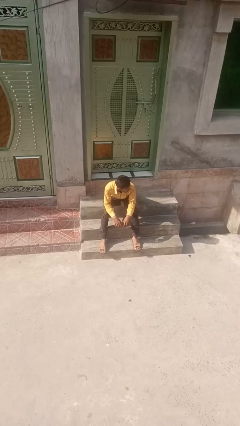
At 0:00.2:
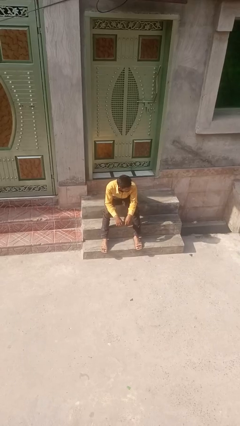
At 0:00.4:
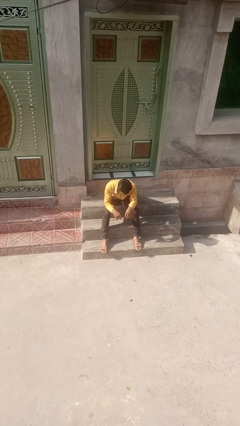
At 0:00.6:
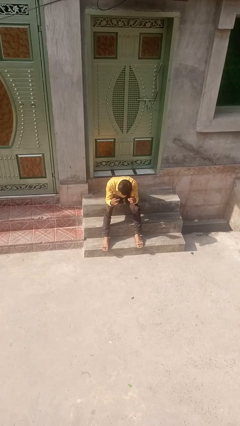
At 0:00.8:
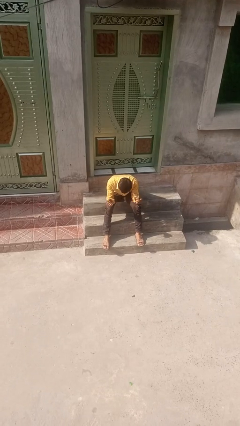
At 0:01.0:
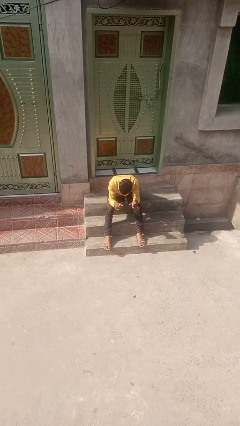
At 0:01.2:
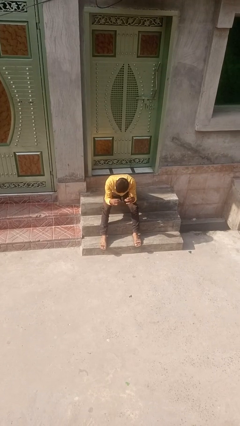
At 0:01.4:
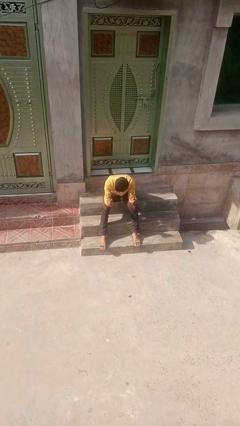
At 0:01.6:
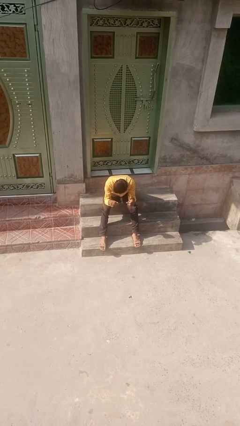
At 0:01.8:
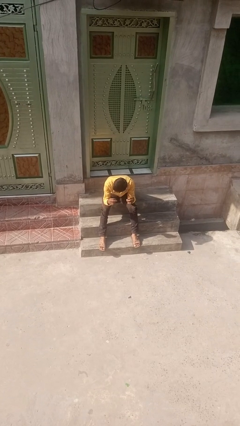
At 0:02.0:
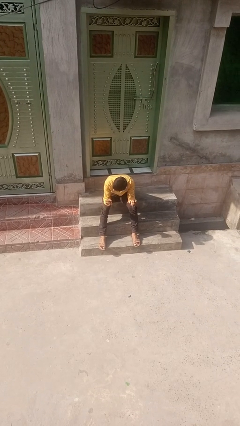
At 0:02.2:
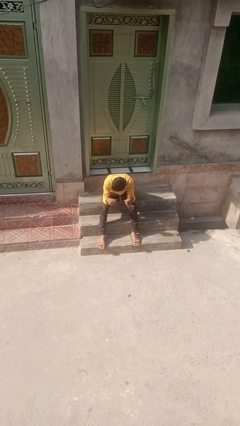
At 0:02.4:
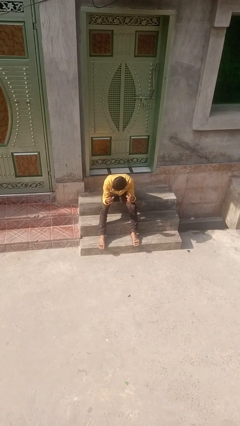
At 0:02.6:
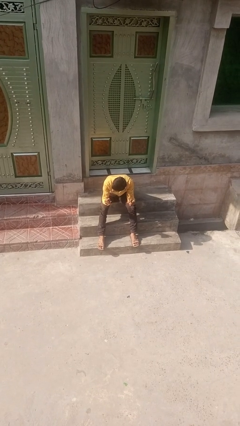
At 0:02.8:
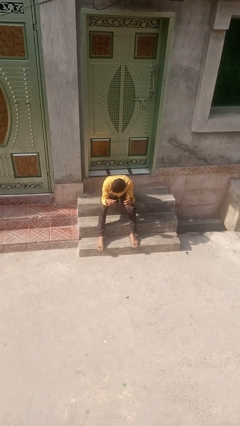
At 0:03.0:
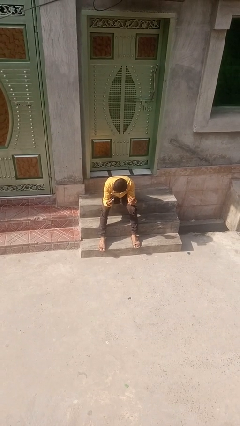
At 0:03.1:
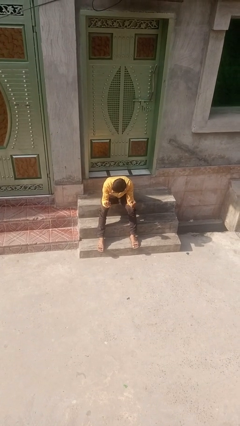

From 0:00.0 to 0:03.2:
person snaps fingers

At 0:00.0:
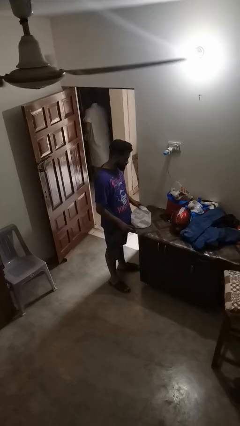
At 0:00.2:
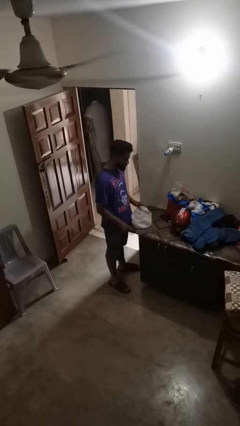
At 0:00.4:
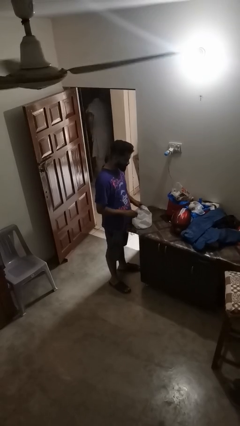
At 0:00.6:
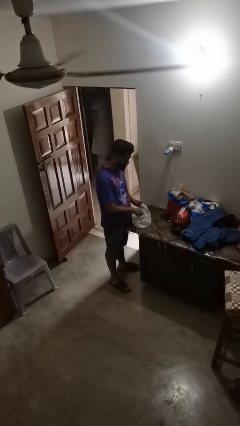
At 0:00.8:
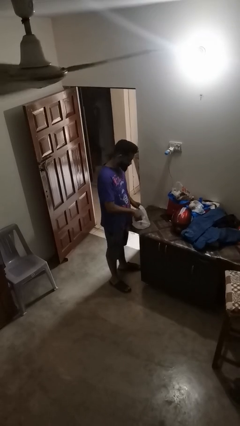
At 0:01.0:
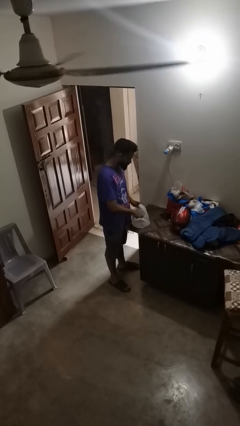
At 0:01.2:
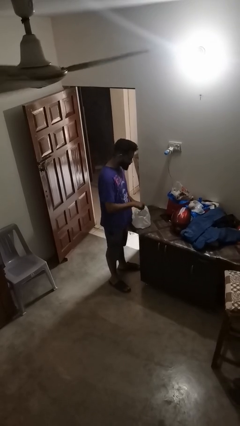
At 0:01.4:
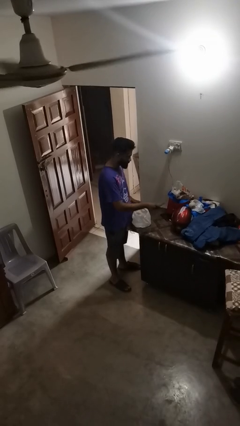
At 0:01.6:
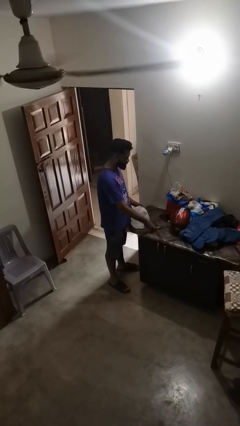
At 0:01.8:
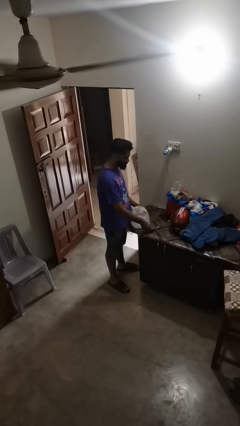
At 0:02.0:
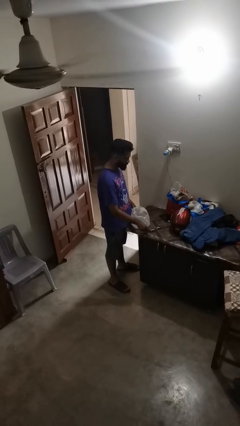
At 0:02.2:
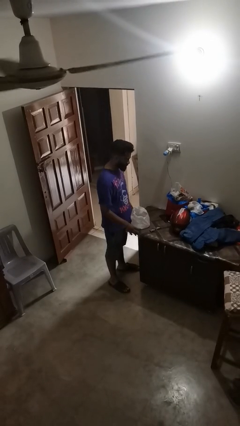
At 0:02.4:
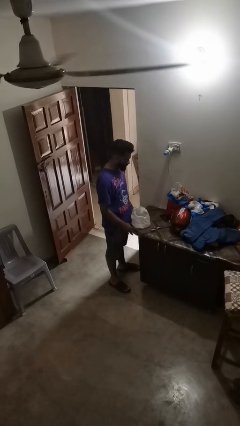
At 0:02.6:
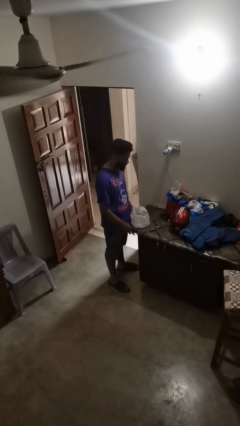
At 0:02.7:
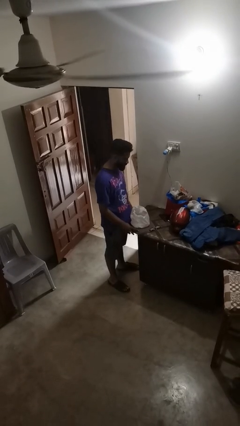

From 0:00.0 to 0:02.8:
person takes object from bag

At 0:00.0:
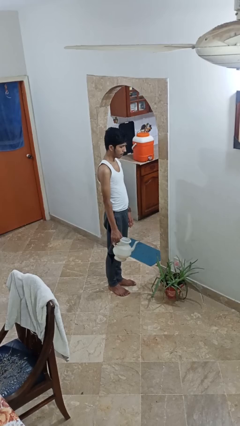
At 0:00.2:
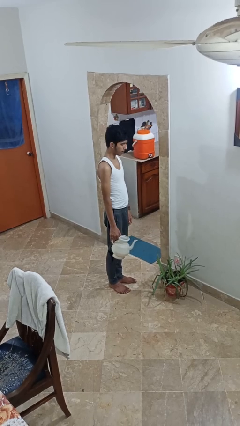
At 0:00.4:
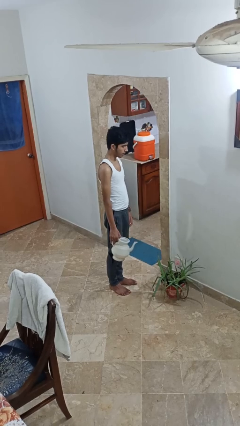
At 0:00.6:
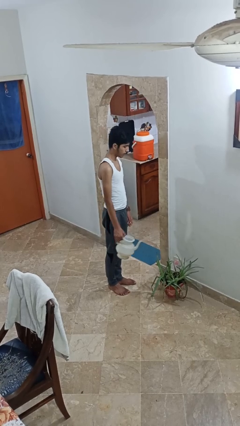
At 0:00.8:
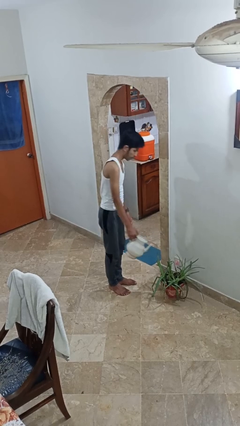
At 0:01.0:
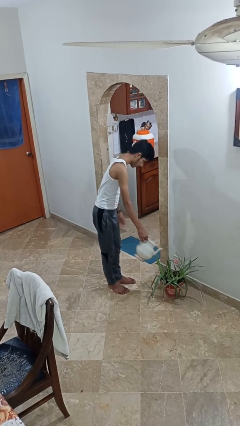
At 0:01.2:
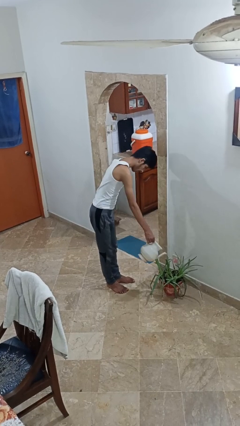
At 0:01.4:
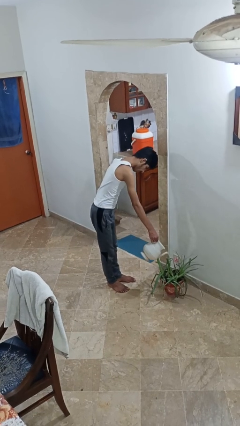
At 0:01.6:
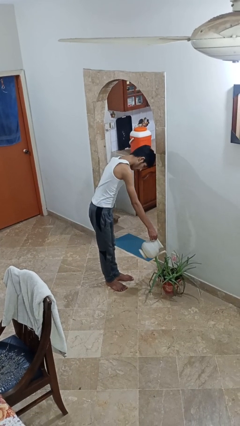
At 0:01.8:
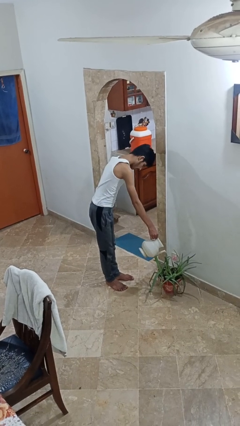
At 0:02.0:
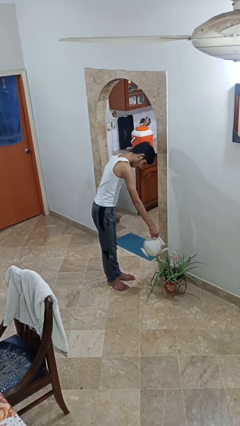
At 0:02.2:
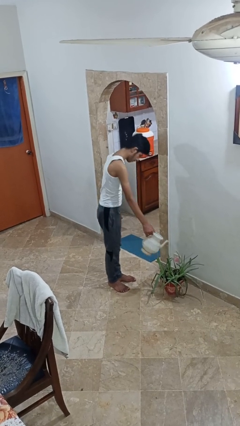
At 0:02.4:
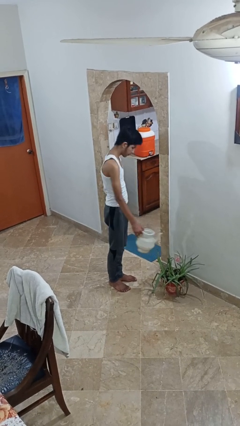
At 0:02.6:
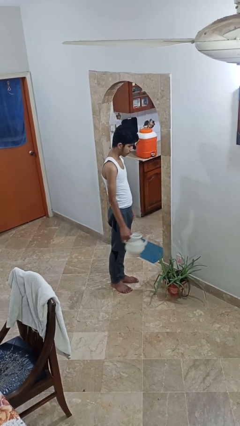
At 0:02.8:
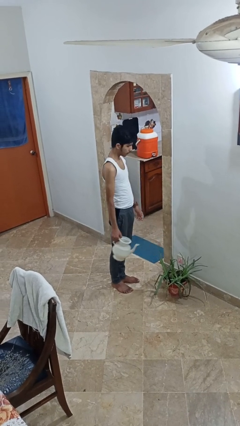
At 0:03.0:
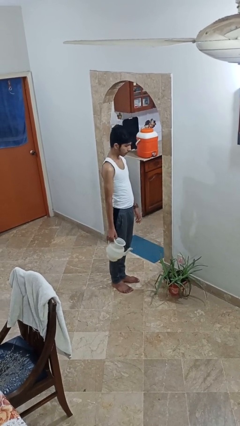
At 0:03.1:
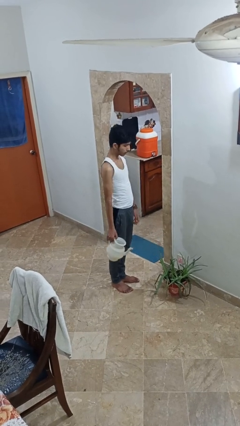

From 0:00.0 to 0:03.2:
person waters houseplant

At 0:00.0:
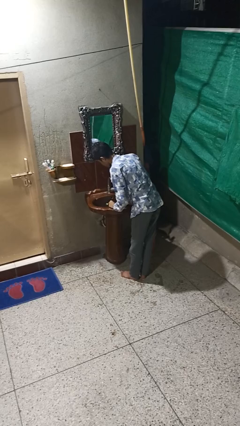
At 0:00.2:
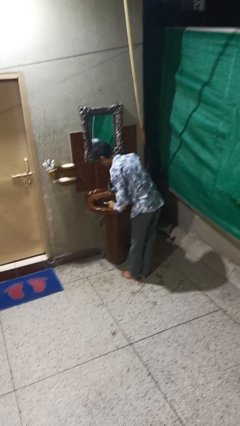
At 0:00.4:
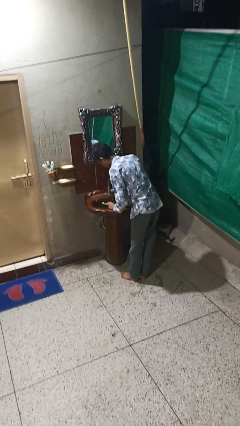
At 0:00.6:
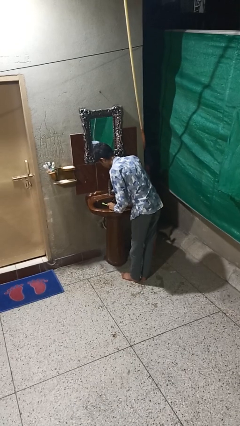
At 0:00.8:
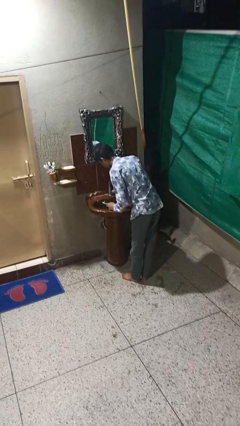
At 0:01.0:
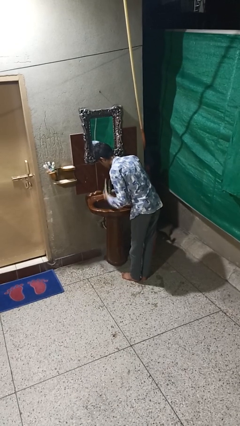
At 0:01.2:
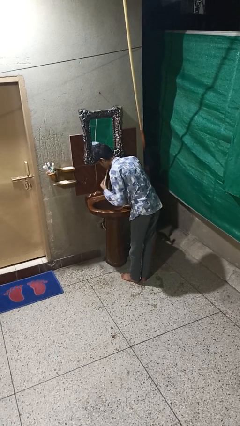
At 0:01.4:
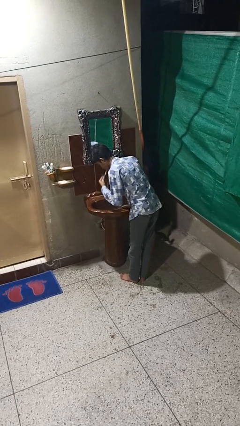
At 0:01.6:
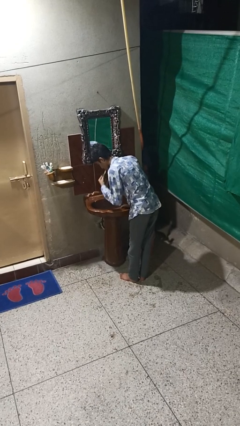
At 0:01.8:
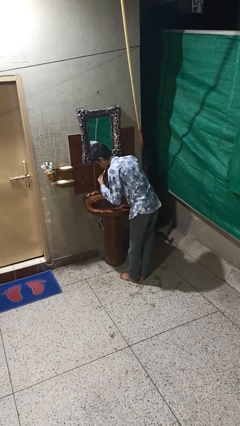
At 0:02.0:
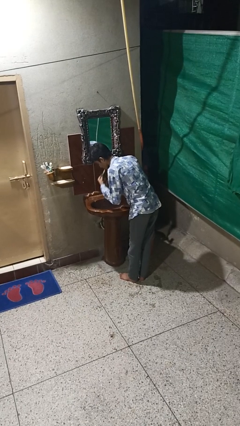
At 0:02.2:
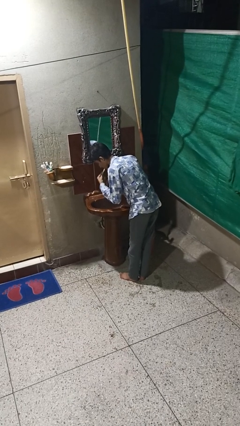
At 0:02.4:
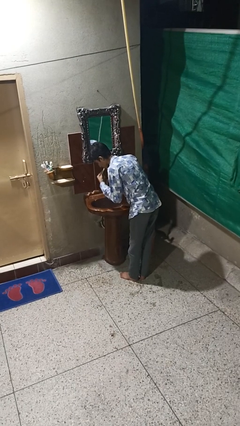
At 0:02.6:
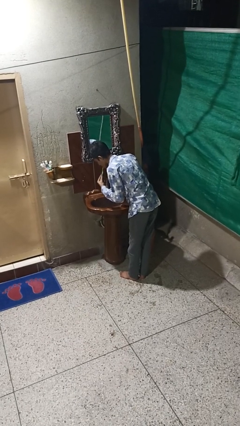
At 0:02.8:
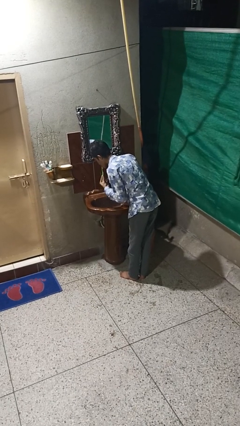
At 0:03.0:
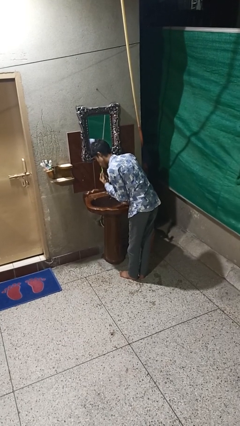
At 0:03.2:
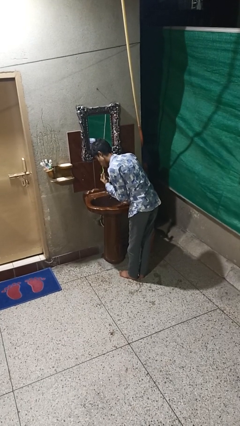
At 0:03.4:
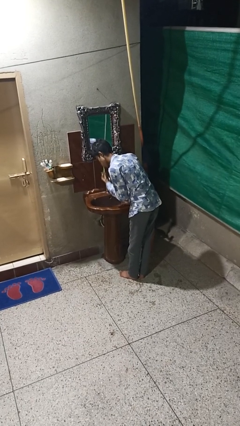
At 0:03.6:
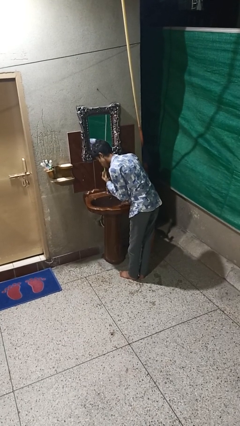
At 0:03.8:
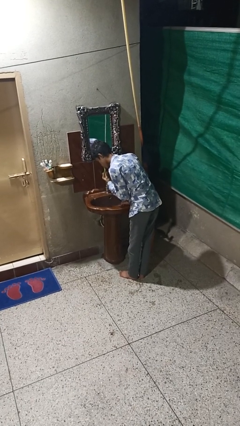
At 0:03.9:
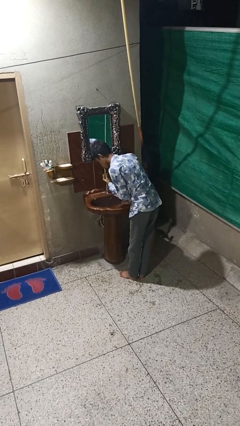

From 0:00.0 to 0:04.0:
person brushes teeth

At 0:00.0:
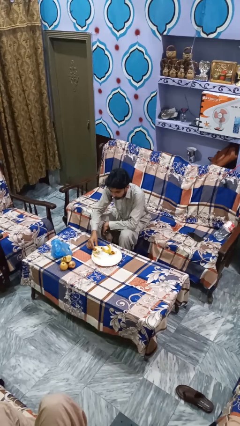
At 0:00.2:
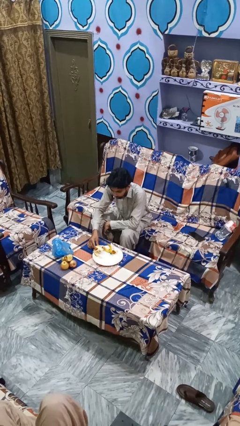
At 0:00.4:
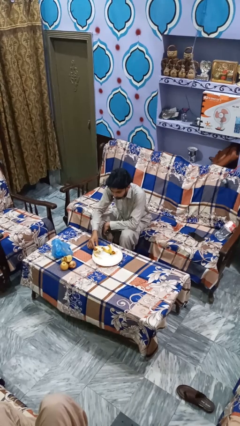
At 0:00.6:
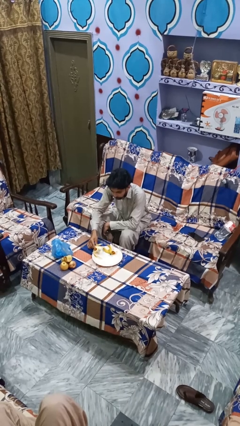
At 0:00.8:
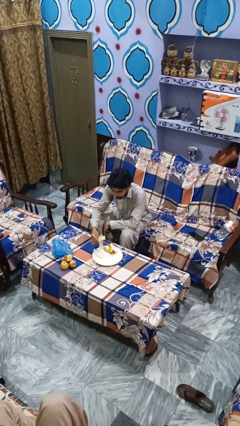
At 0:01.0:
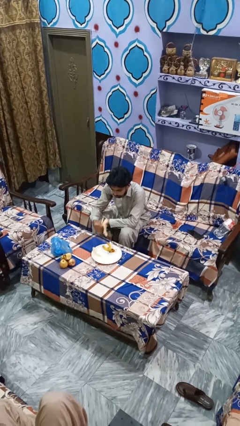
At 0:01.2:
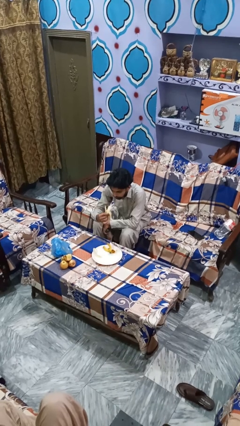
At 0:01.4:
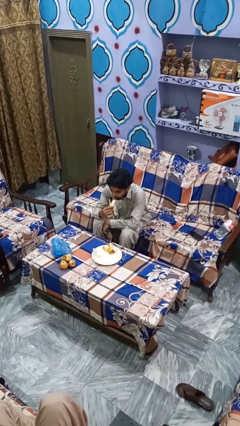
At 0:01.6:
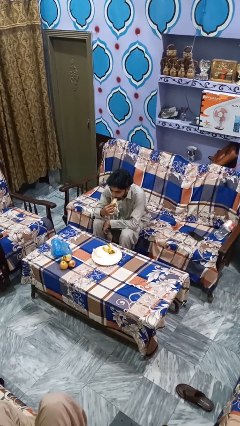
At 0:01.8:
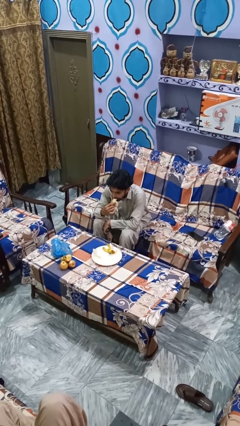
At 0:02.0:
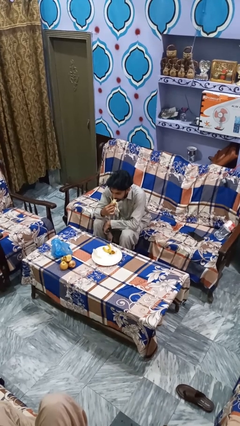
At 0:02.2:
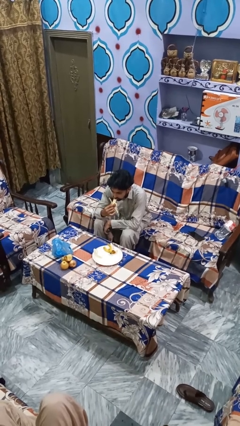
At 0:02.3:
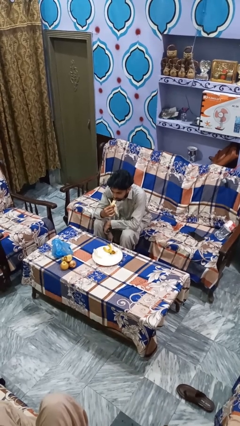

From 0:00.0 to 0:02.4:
person eats banana

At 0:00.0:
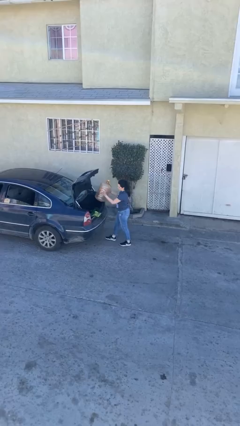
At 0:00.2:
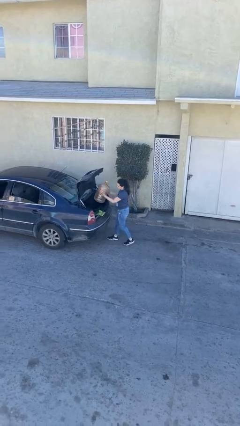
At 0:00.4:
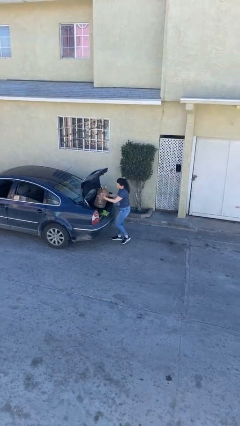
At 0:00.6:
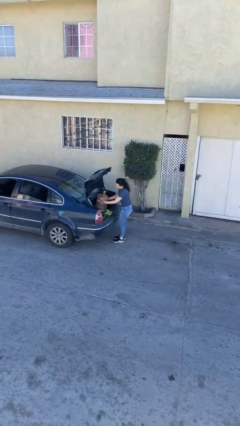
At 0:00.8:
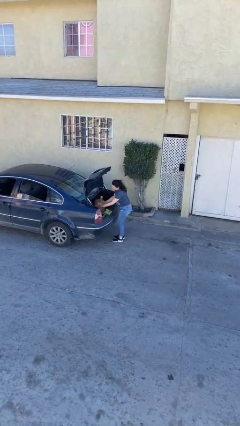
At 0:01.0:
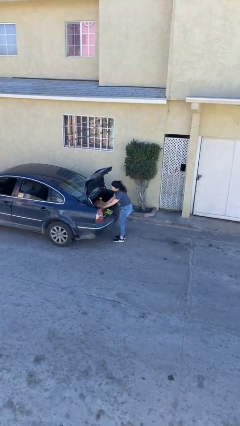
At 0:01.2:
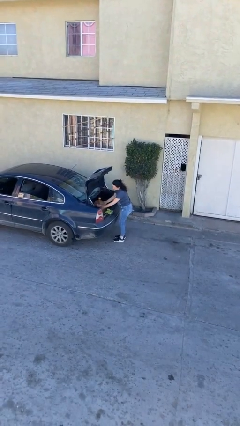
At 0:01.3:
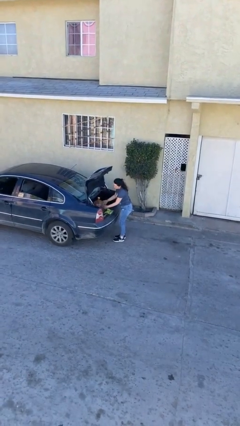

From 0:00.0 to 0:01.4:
person loads car
